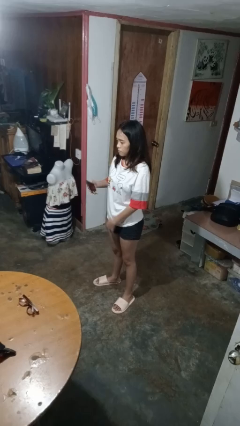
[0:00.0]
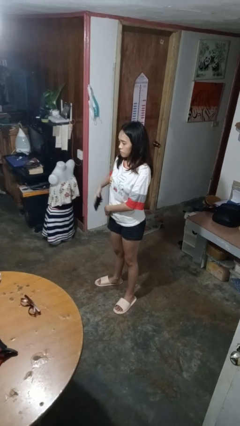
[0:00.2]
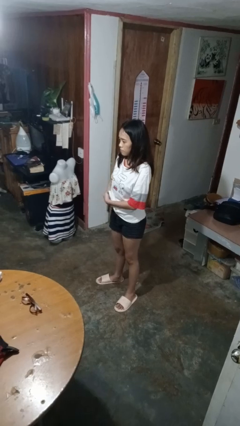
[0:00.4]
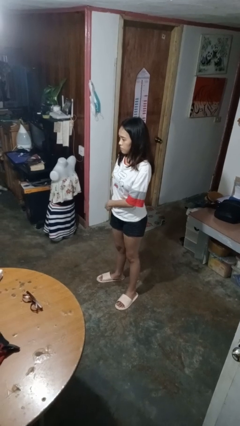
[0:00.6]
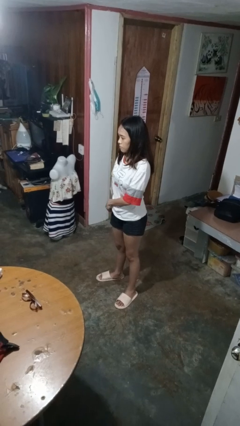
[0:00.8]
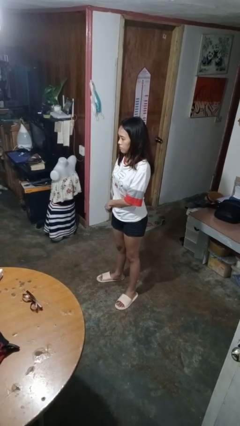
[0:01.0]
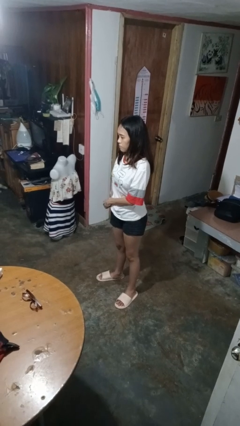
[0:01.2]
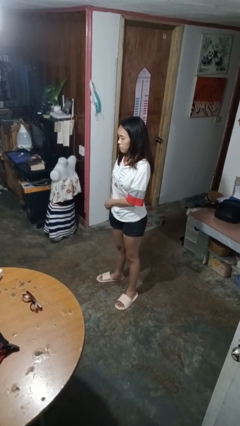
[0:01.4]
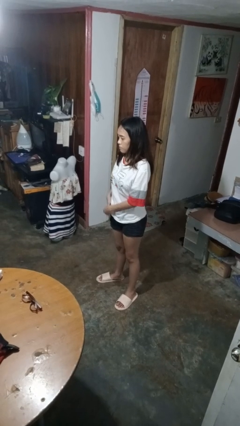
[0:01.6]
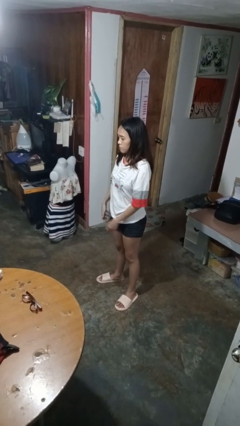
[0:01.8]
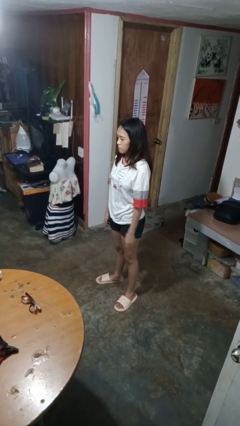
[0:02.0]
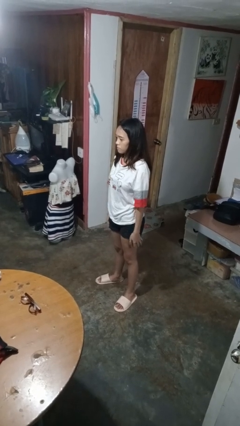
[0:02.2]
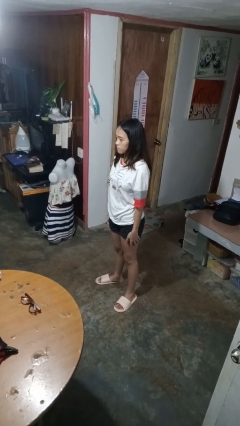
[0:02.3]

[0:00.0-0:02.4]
person puts phone into pocket

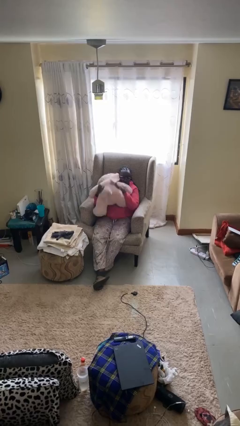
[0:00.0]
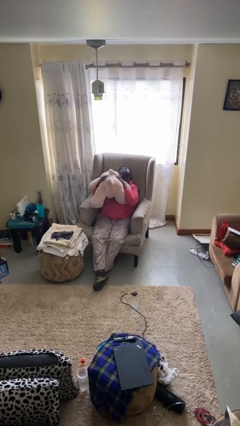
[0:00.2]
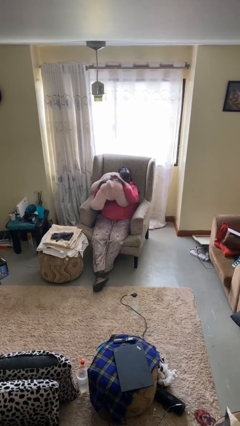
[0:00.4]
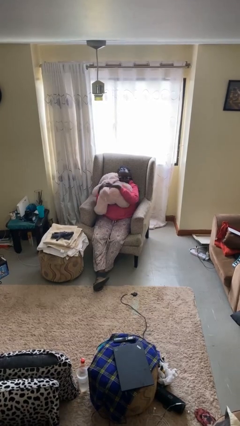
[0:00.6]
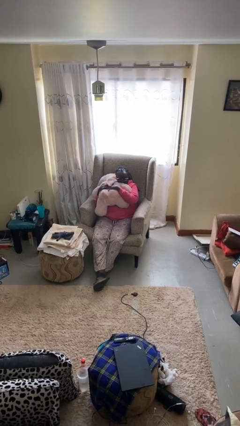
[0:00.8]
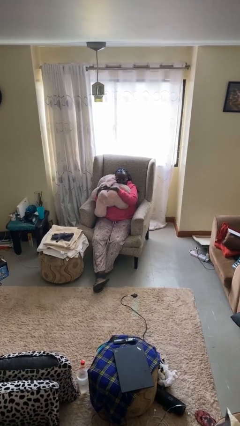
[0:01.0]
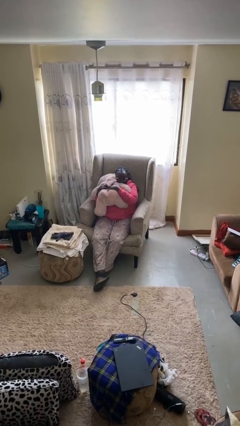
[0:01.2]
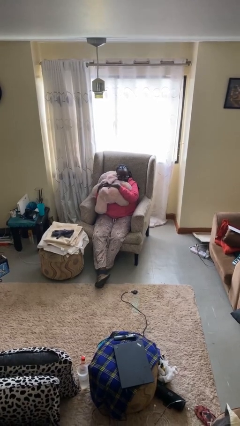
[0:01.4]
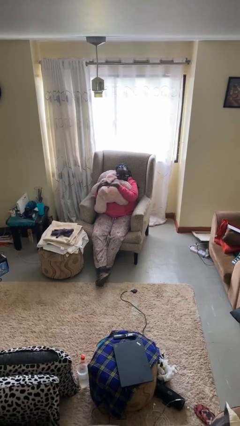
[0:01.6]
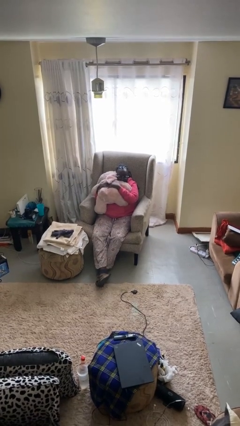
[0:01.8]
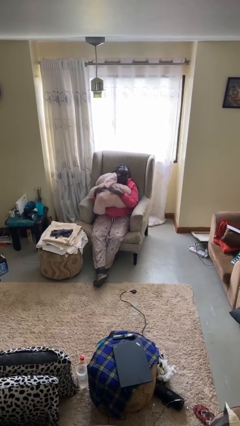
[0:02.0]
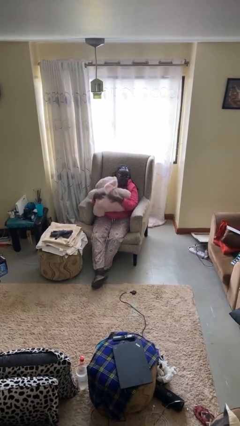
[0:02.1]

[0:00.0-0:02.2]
person hugs stuffed animal

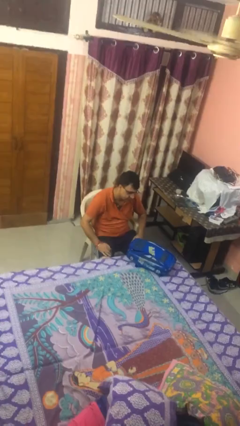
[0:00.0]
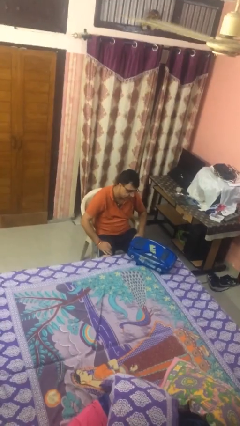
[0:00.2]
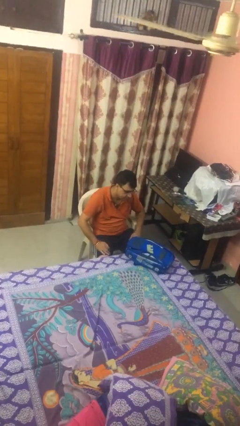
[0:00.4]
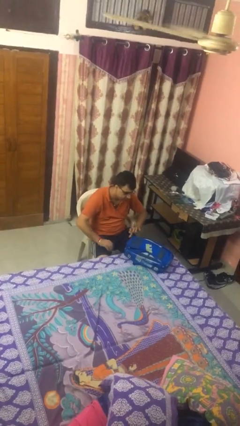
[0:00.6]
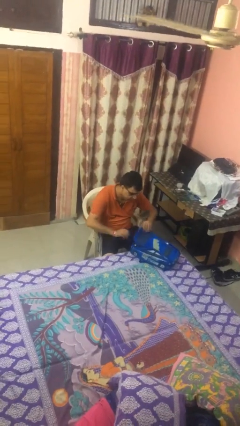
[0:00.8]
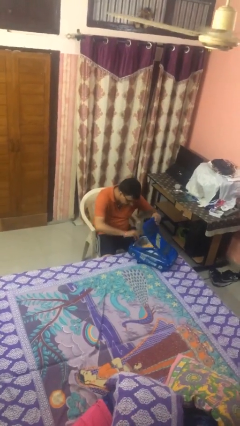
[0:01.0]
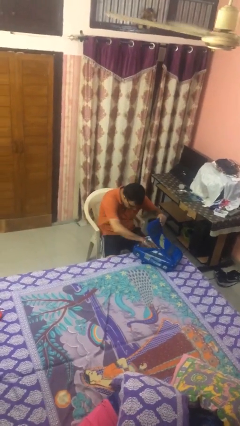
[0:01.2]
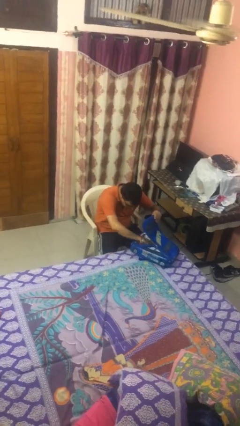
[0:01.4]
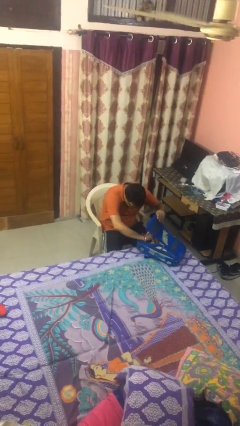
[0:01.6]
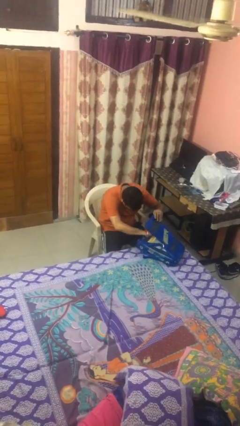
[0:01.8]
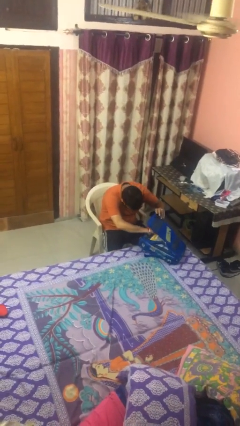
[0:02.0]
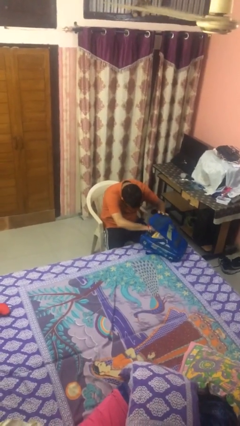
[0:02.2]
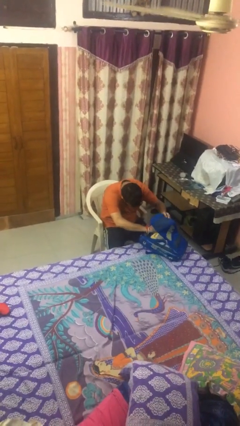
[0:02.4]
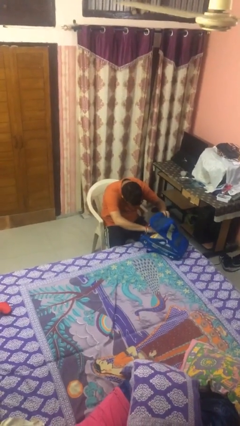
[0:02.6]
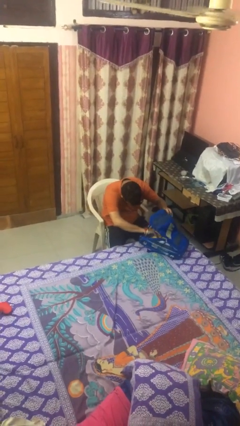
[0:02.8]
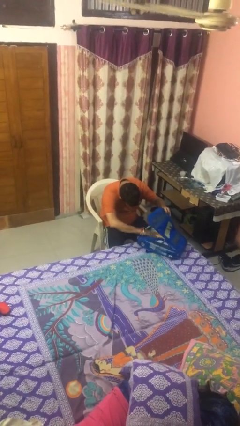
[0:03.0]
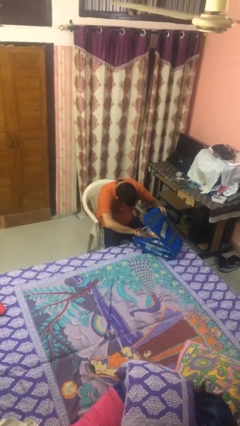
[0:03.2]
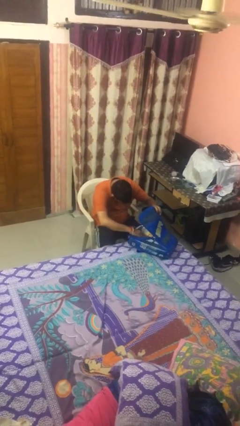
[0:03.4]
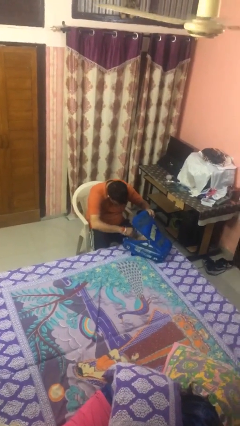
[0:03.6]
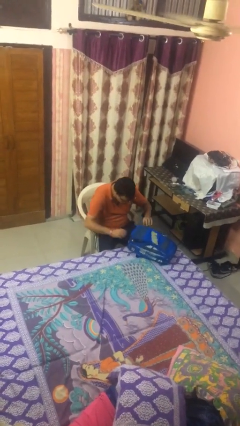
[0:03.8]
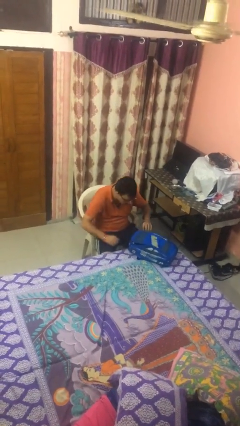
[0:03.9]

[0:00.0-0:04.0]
person searches in bag

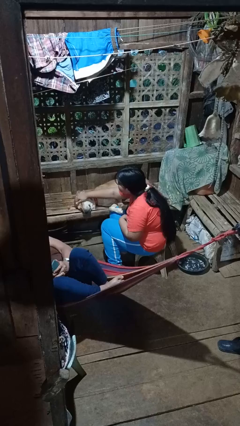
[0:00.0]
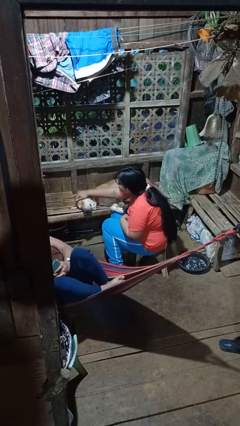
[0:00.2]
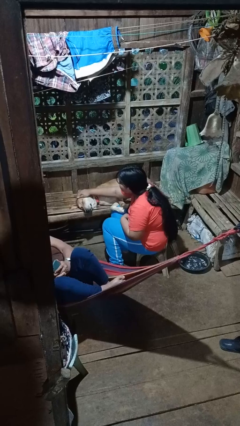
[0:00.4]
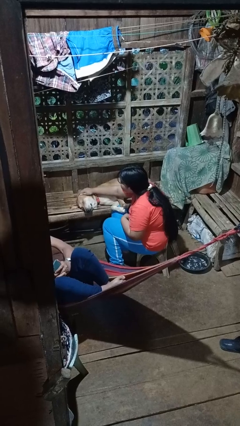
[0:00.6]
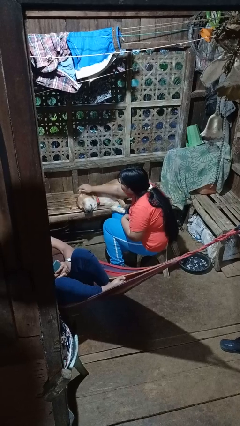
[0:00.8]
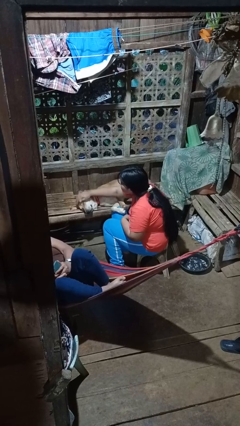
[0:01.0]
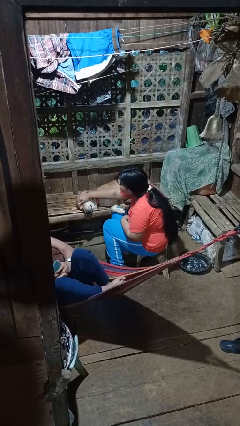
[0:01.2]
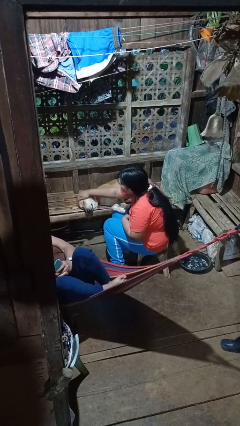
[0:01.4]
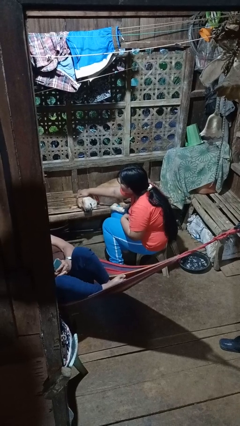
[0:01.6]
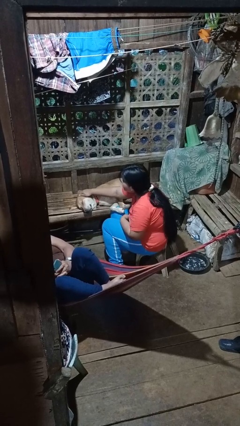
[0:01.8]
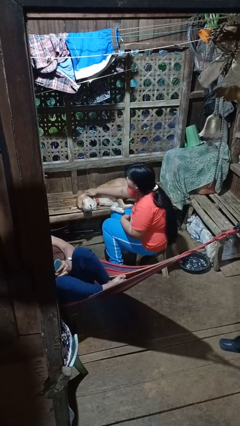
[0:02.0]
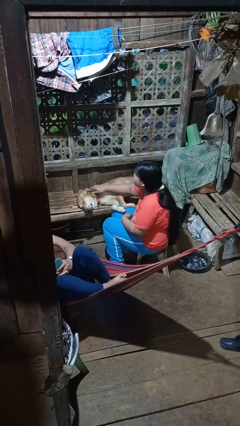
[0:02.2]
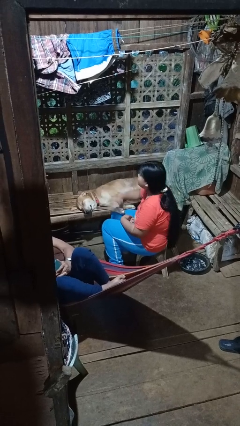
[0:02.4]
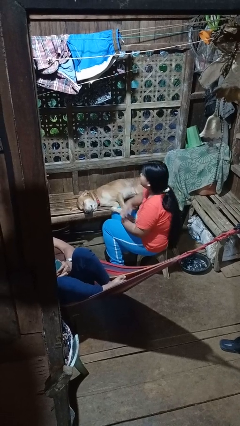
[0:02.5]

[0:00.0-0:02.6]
person pets dog

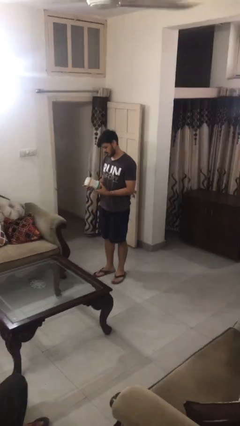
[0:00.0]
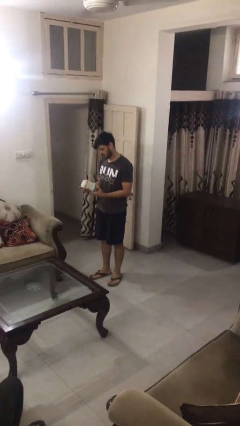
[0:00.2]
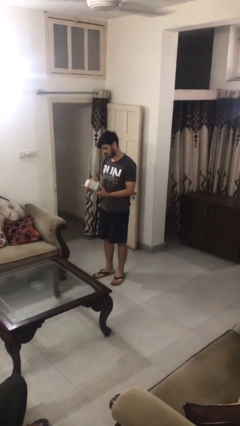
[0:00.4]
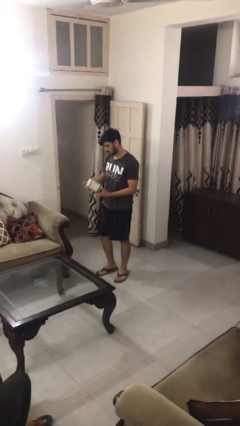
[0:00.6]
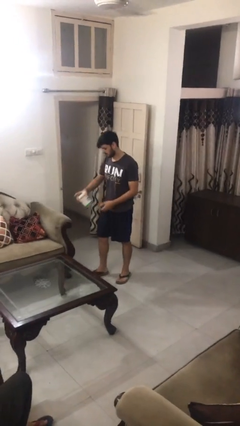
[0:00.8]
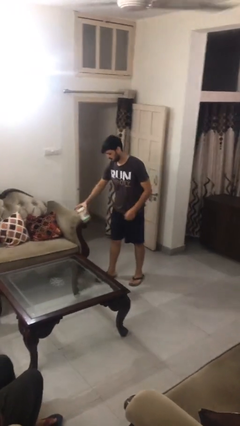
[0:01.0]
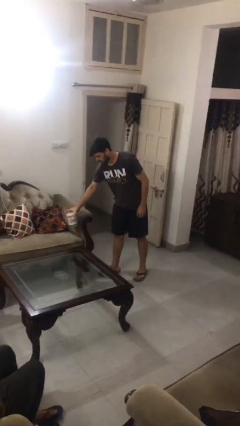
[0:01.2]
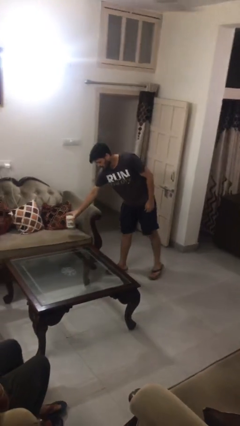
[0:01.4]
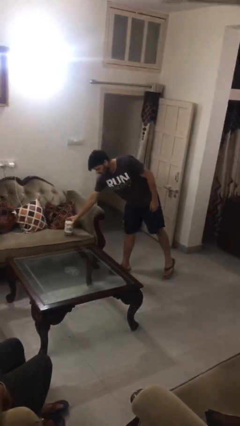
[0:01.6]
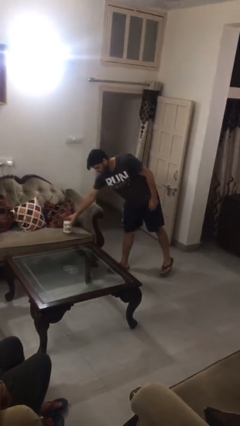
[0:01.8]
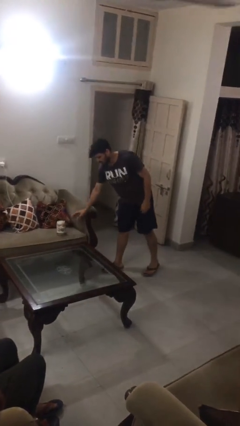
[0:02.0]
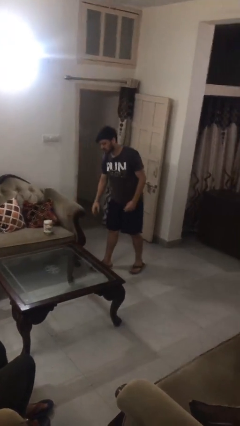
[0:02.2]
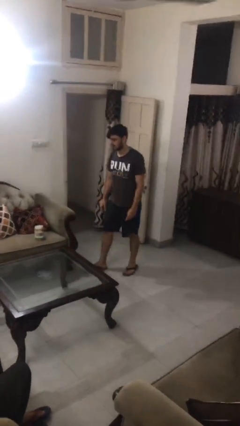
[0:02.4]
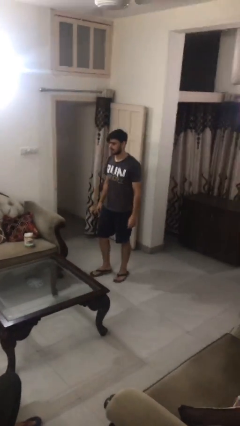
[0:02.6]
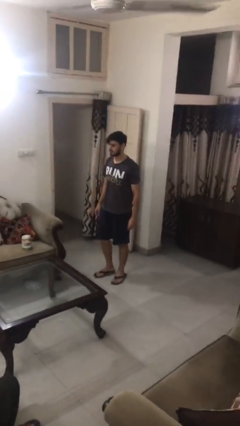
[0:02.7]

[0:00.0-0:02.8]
person puts down object on couch

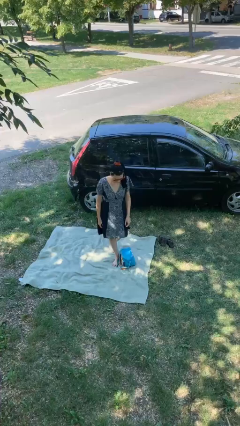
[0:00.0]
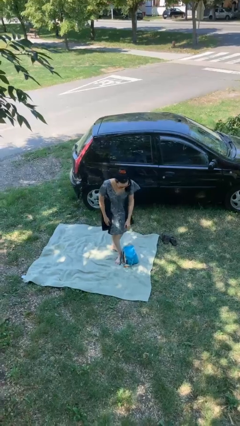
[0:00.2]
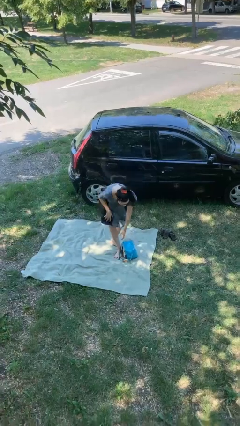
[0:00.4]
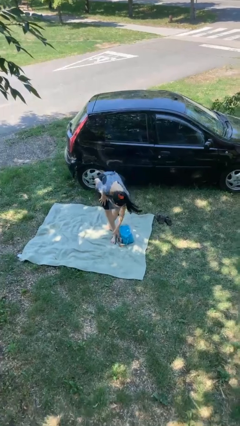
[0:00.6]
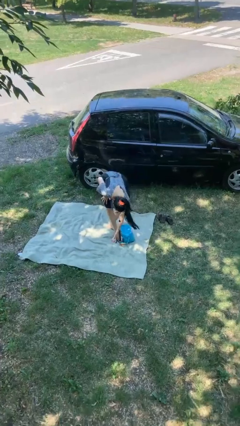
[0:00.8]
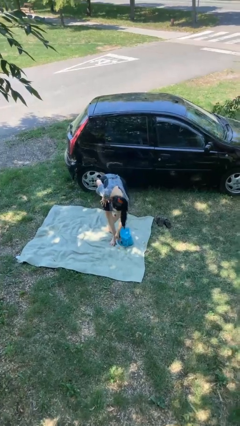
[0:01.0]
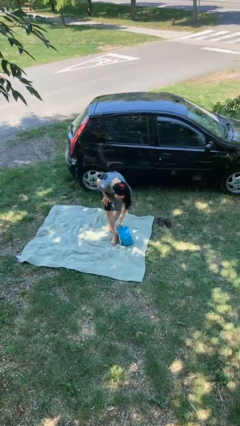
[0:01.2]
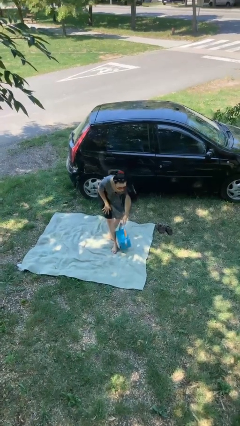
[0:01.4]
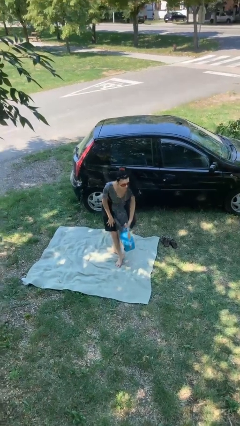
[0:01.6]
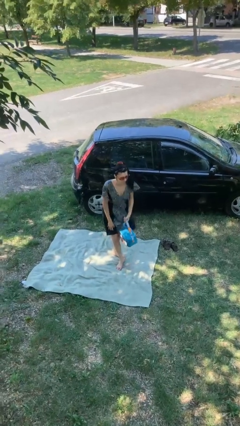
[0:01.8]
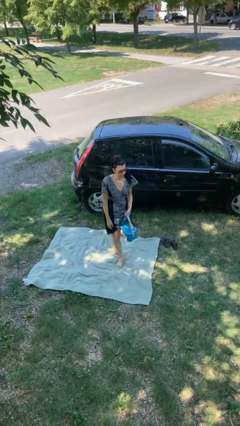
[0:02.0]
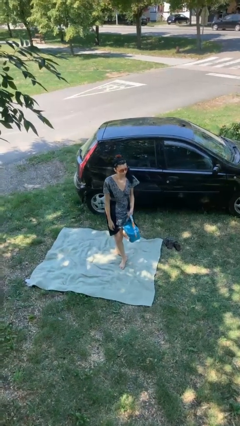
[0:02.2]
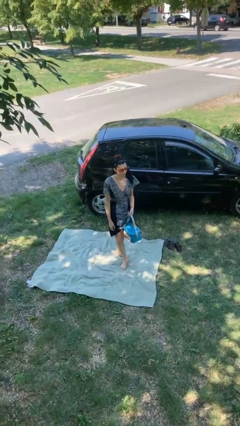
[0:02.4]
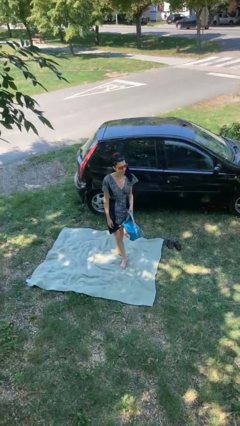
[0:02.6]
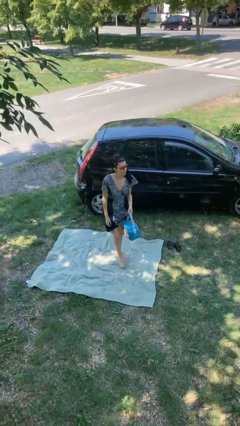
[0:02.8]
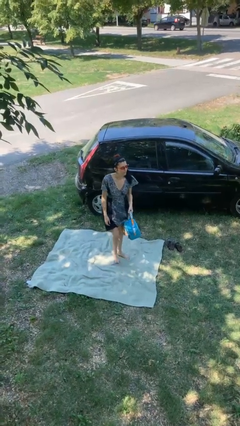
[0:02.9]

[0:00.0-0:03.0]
person picks up object from floor
